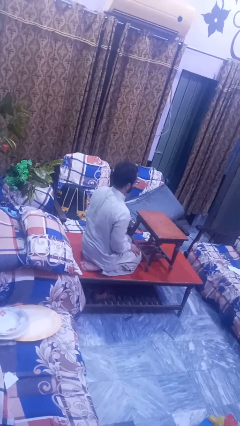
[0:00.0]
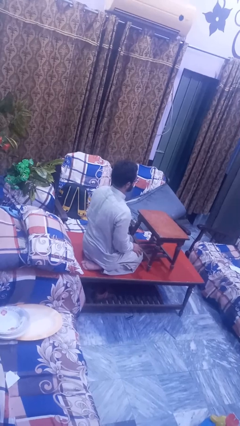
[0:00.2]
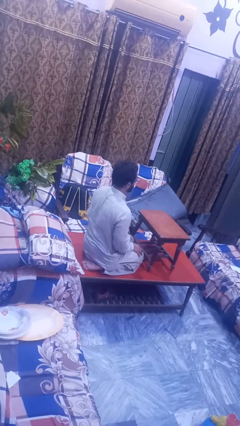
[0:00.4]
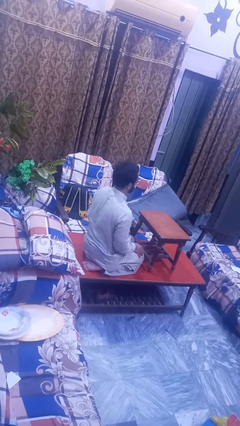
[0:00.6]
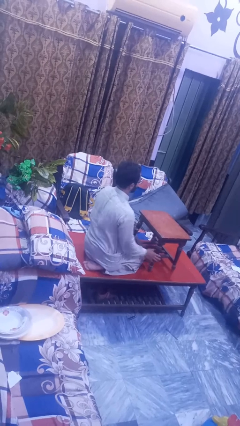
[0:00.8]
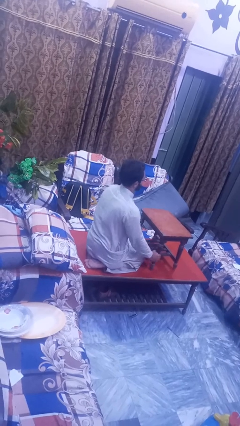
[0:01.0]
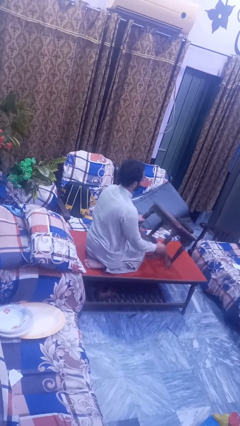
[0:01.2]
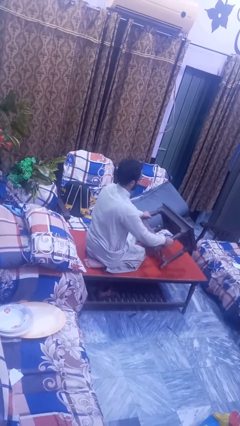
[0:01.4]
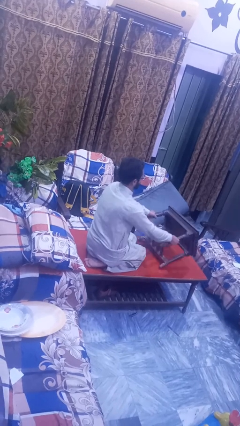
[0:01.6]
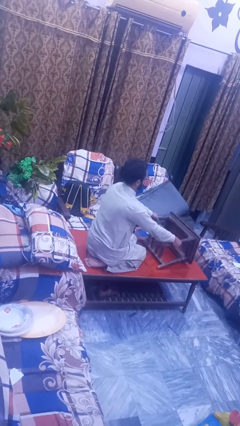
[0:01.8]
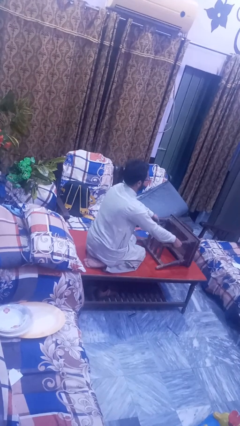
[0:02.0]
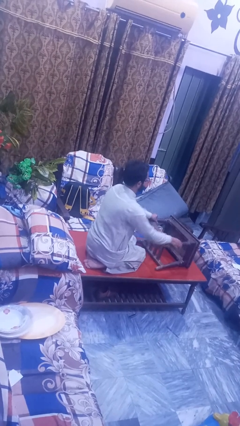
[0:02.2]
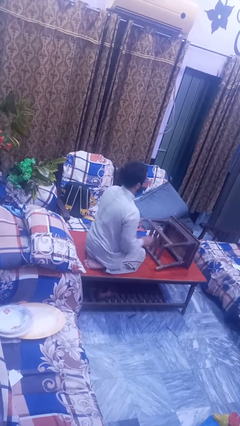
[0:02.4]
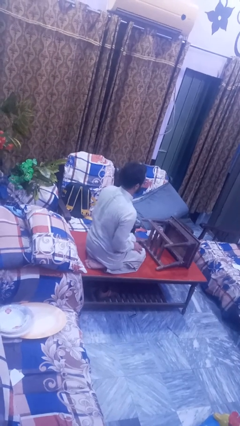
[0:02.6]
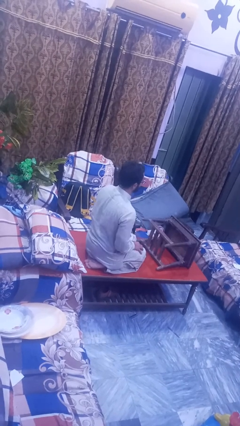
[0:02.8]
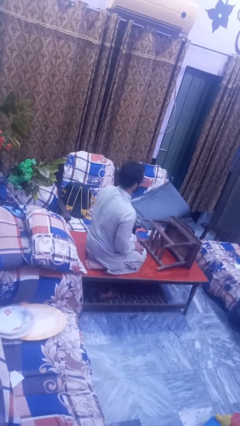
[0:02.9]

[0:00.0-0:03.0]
person knocks over furniture

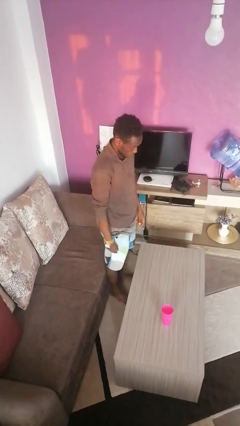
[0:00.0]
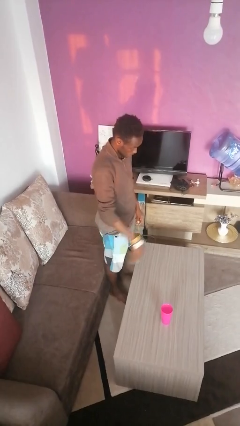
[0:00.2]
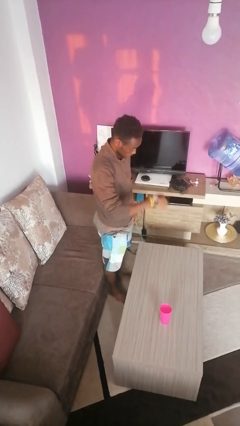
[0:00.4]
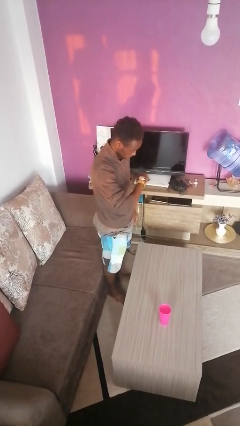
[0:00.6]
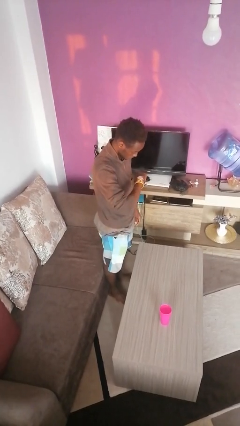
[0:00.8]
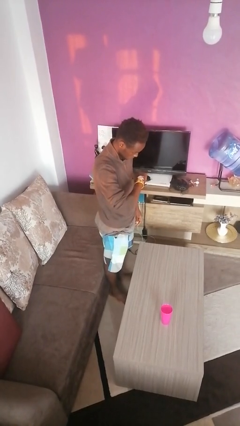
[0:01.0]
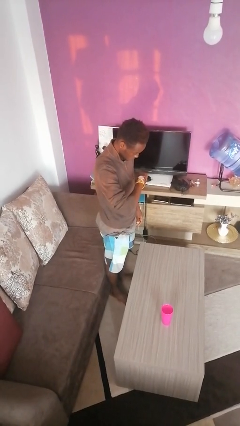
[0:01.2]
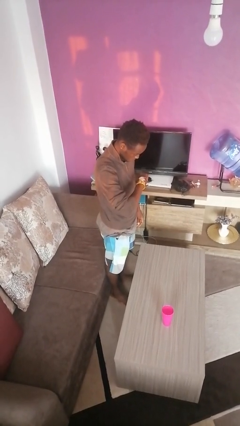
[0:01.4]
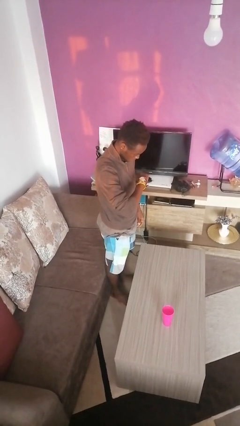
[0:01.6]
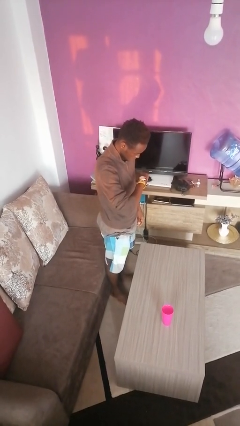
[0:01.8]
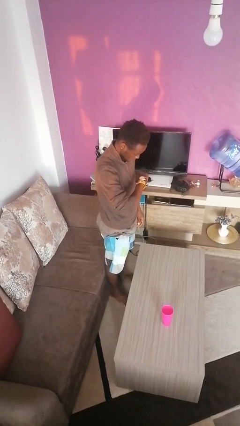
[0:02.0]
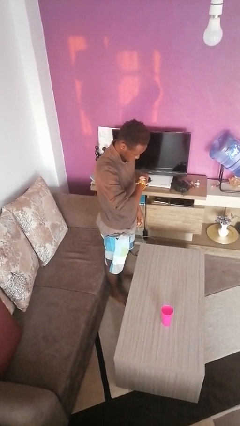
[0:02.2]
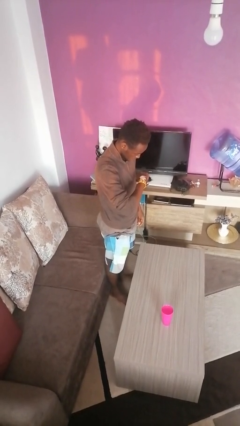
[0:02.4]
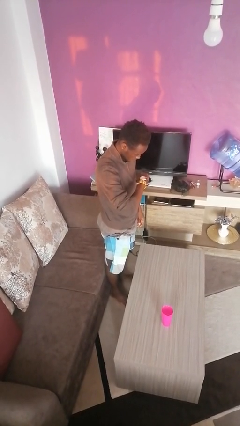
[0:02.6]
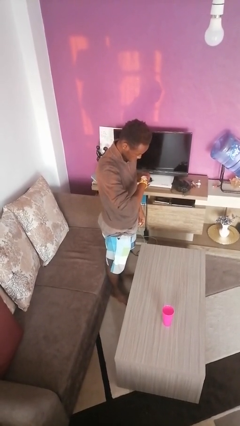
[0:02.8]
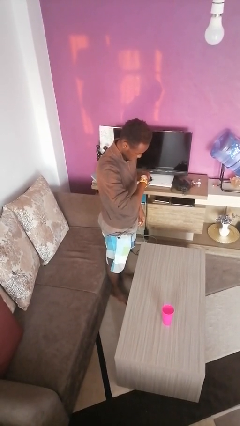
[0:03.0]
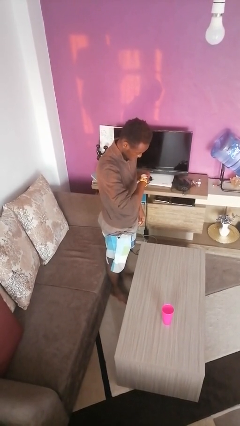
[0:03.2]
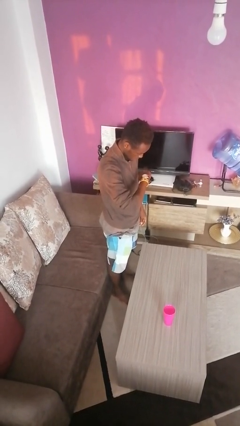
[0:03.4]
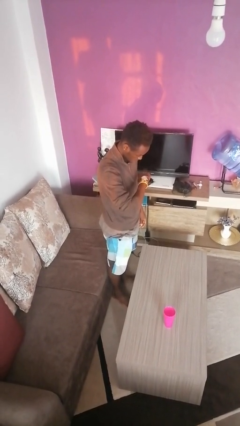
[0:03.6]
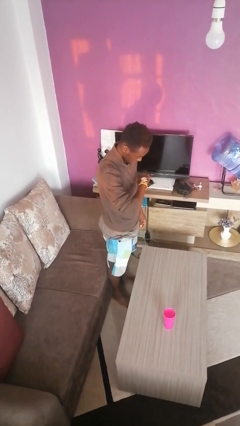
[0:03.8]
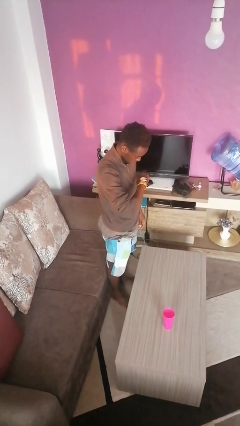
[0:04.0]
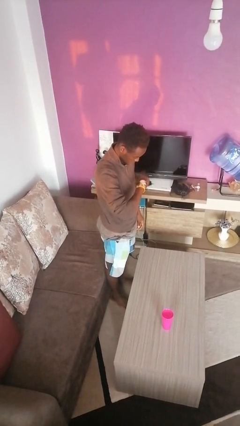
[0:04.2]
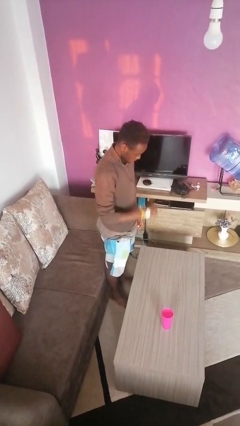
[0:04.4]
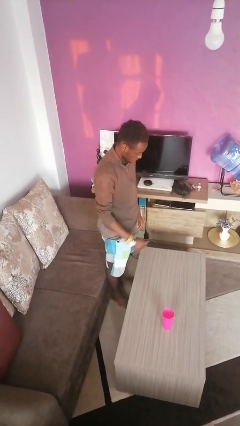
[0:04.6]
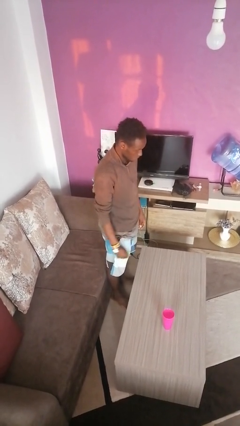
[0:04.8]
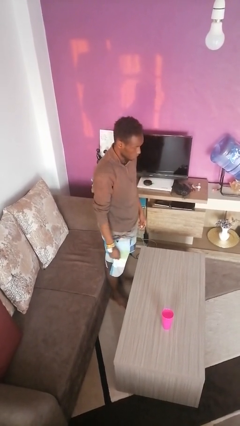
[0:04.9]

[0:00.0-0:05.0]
person looks at wristwatch

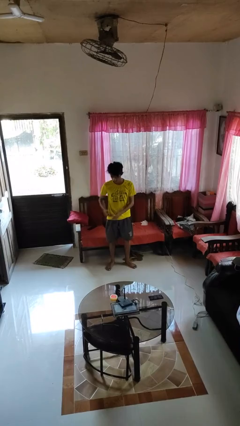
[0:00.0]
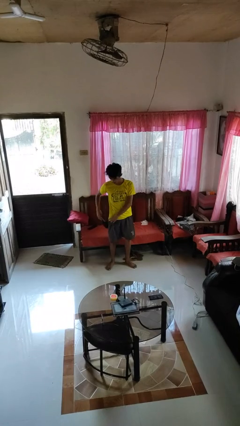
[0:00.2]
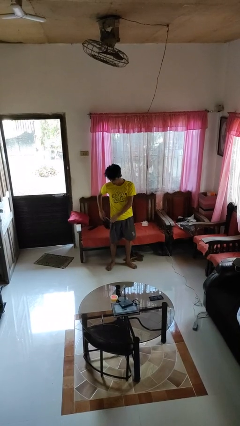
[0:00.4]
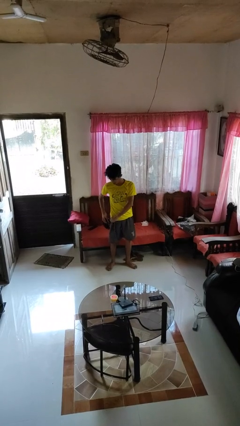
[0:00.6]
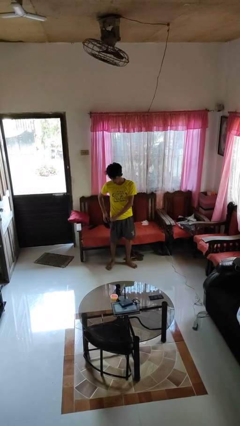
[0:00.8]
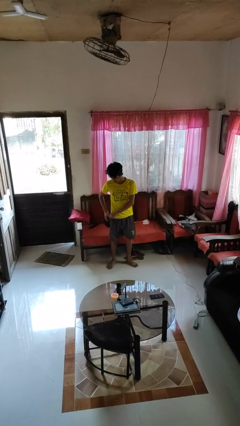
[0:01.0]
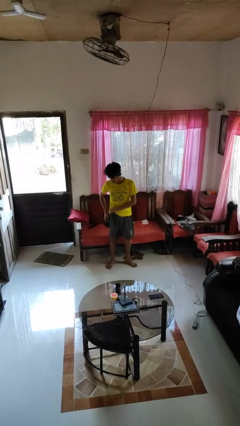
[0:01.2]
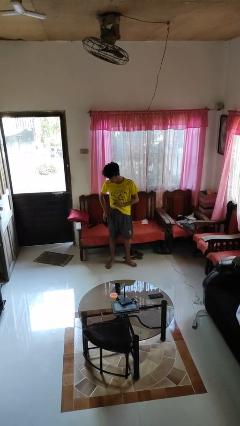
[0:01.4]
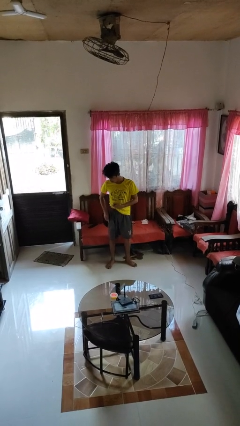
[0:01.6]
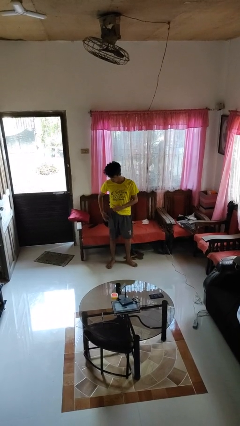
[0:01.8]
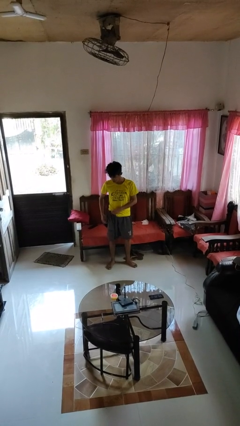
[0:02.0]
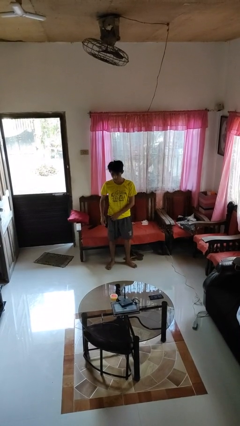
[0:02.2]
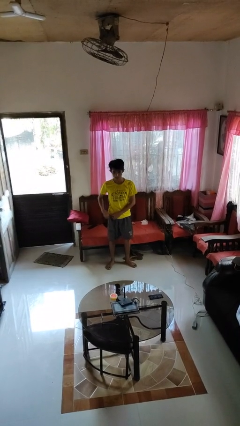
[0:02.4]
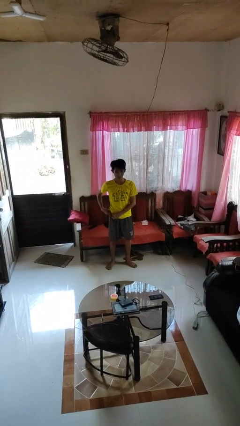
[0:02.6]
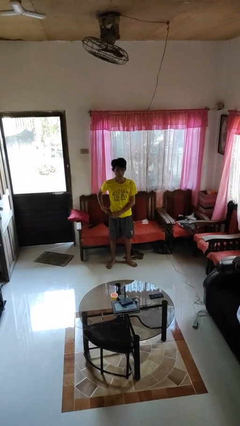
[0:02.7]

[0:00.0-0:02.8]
person puts phone into pocket

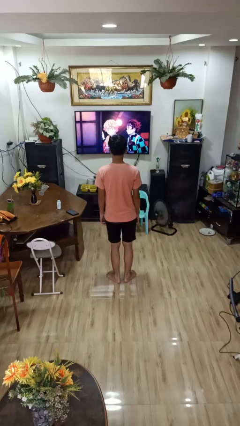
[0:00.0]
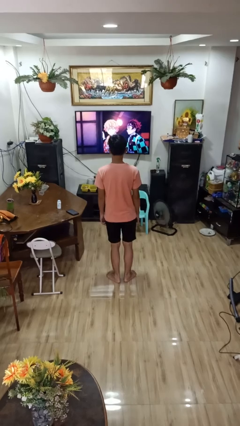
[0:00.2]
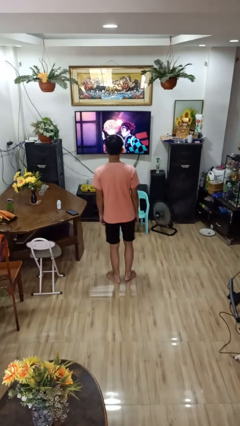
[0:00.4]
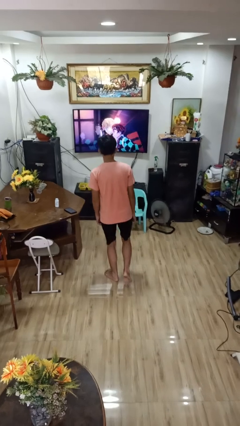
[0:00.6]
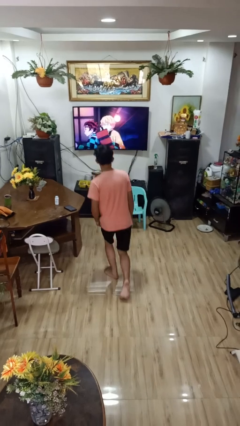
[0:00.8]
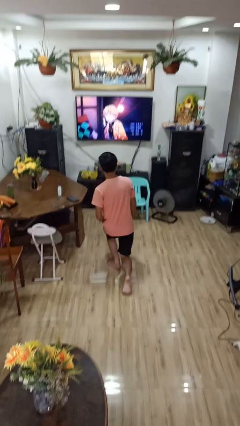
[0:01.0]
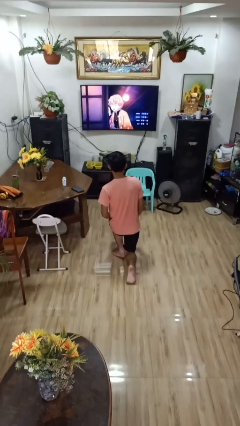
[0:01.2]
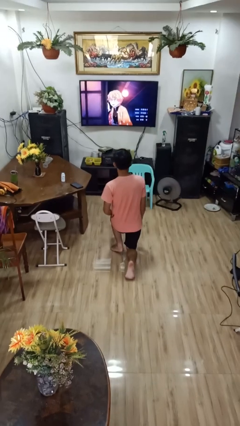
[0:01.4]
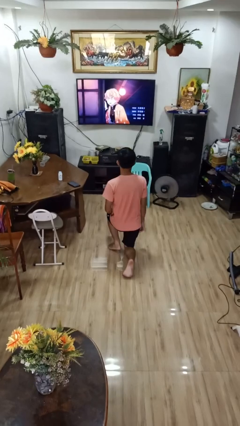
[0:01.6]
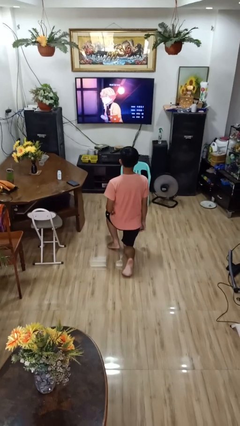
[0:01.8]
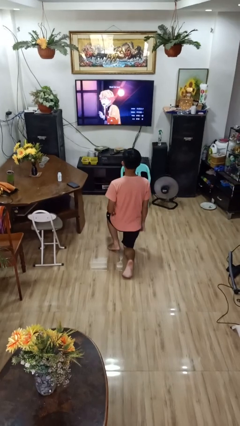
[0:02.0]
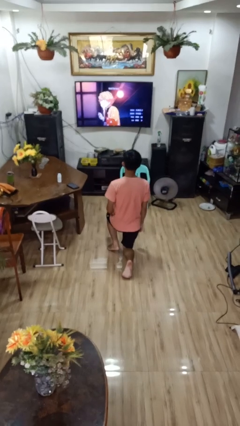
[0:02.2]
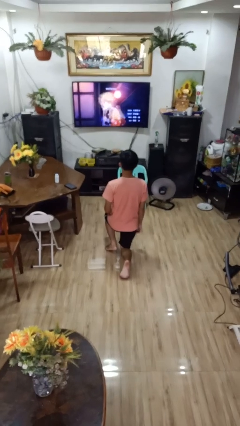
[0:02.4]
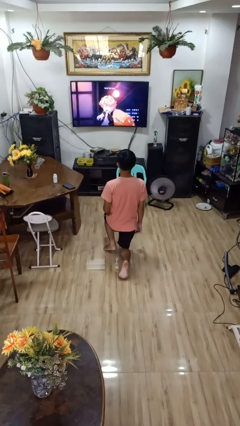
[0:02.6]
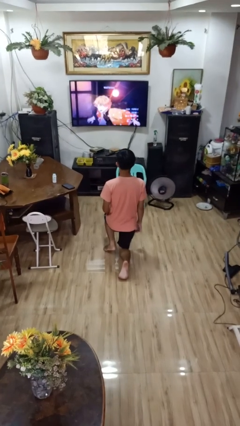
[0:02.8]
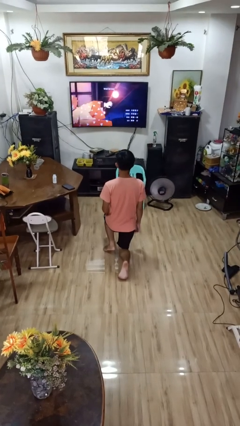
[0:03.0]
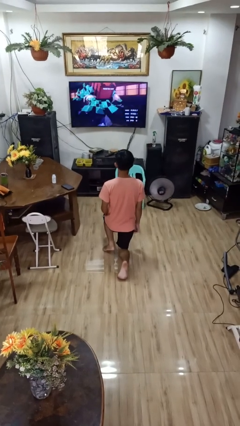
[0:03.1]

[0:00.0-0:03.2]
person kneels

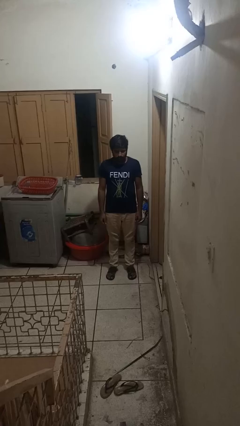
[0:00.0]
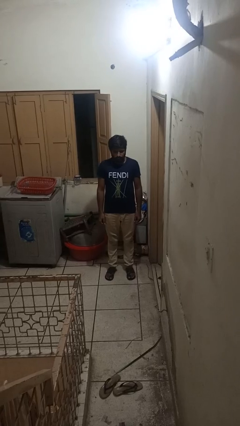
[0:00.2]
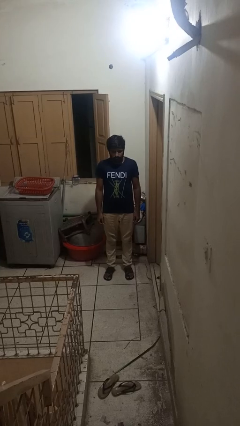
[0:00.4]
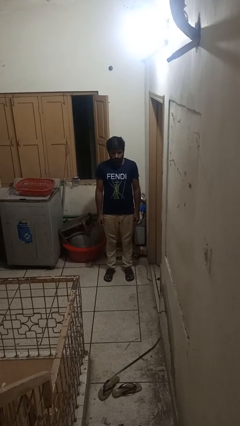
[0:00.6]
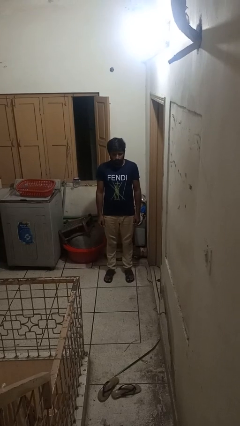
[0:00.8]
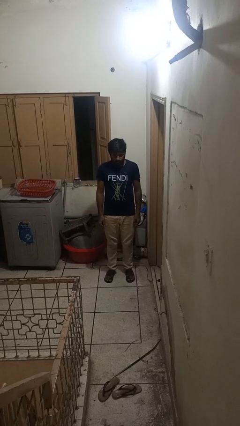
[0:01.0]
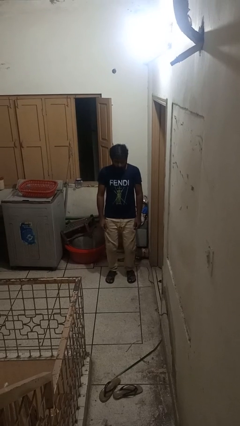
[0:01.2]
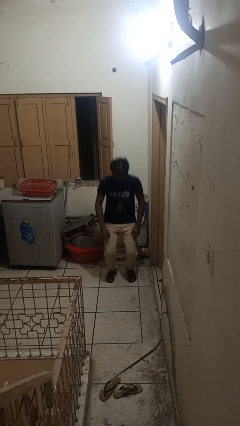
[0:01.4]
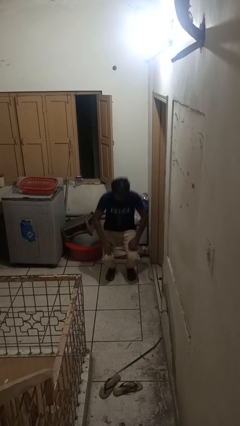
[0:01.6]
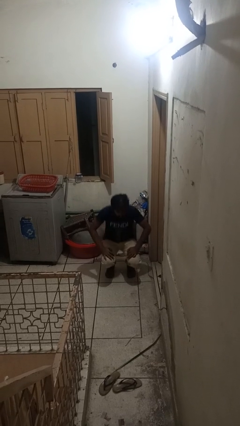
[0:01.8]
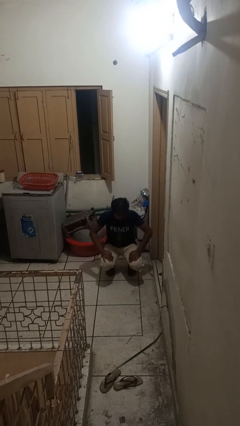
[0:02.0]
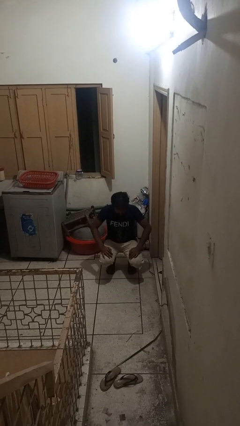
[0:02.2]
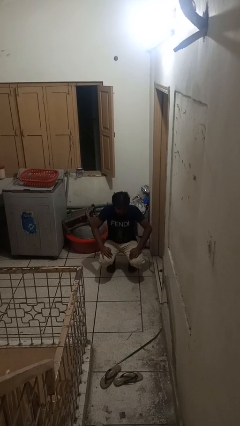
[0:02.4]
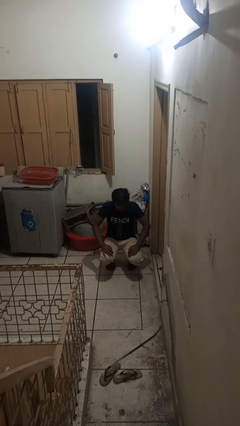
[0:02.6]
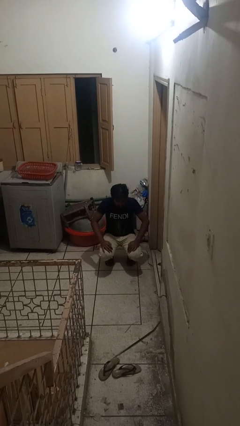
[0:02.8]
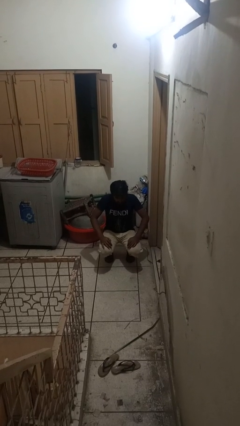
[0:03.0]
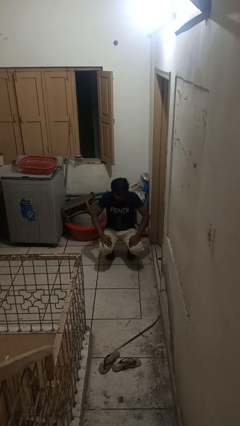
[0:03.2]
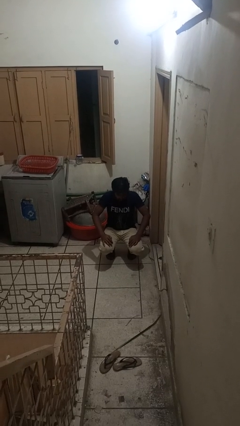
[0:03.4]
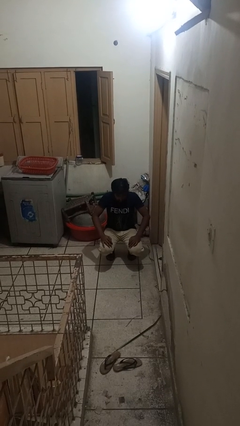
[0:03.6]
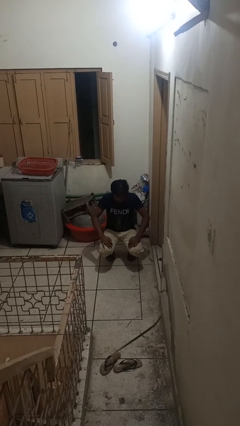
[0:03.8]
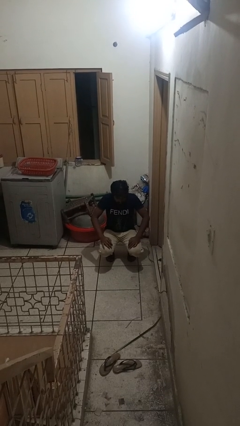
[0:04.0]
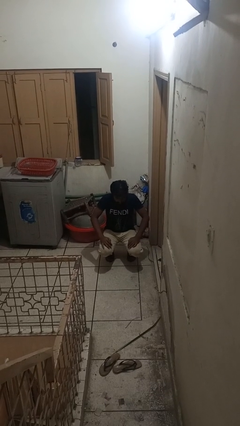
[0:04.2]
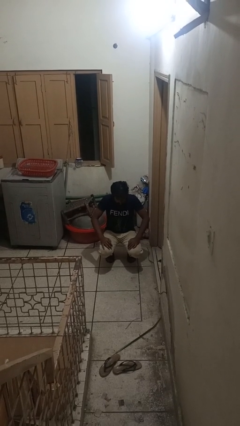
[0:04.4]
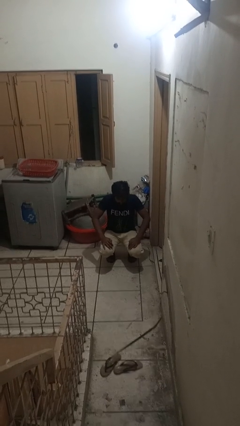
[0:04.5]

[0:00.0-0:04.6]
person squats
